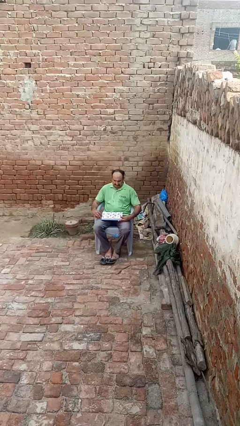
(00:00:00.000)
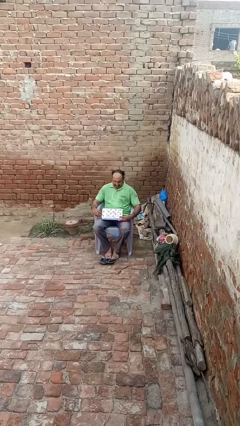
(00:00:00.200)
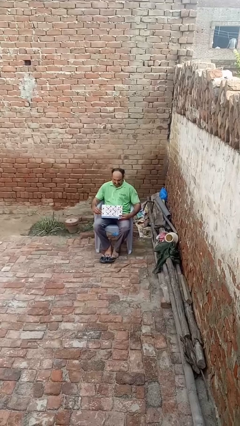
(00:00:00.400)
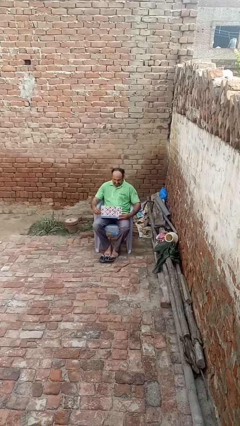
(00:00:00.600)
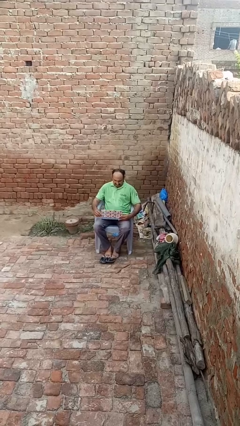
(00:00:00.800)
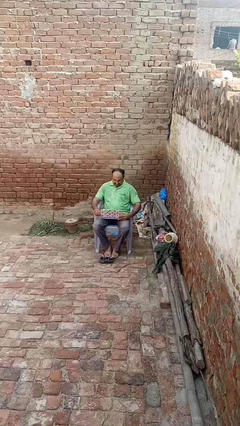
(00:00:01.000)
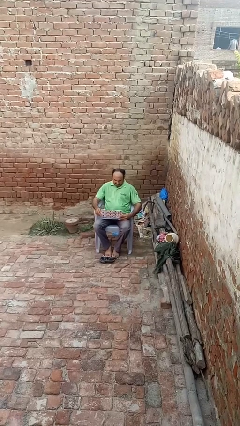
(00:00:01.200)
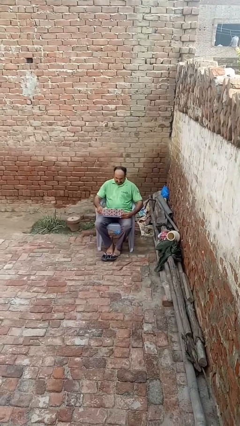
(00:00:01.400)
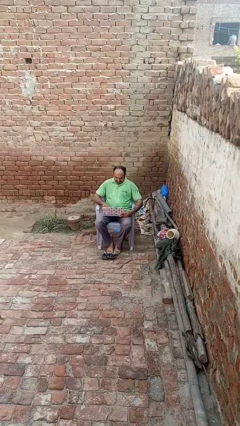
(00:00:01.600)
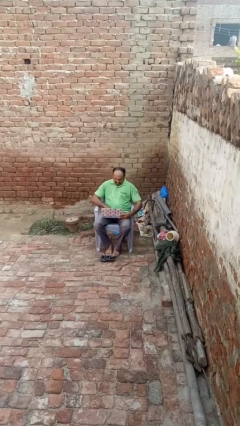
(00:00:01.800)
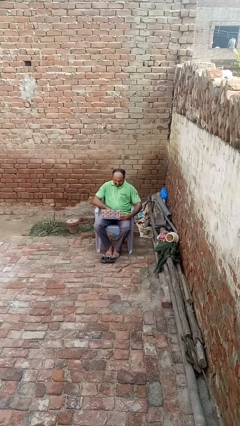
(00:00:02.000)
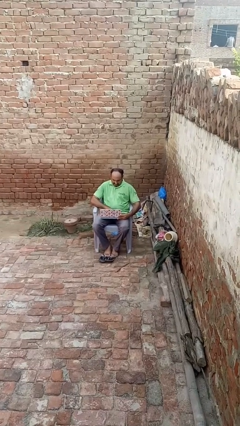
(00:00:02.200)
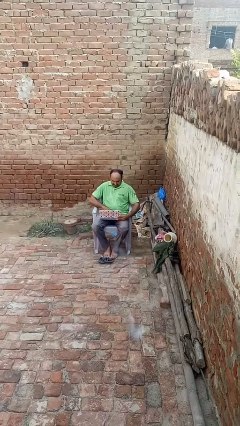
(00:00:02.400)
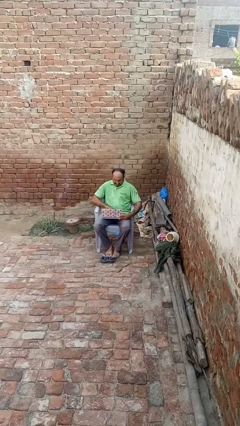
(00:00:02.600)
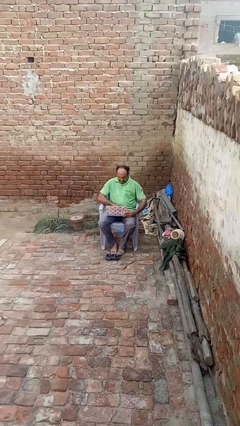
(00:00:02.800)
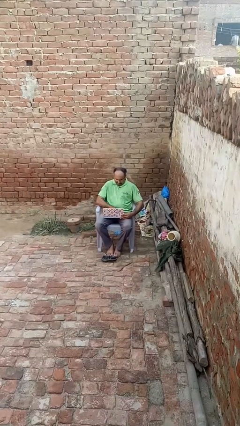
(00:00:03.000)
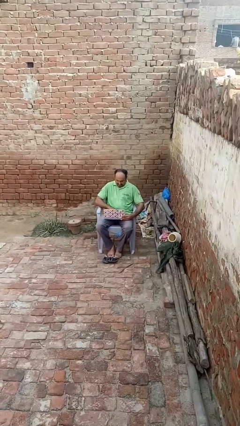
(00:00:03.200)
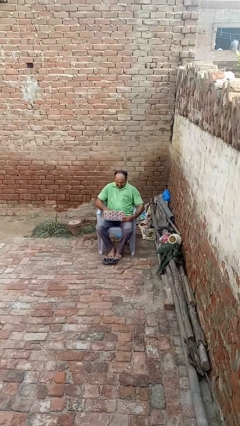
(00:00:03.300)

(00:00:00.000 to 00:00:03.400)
person opens laptop

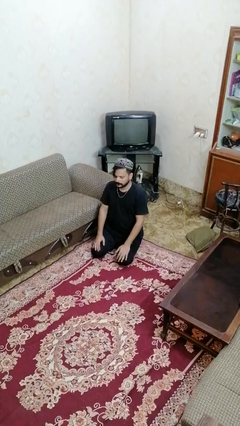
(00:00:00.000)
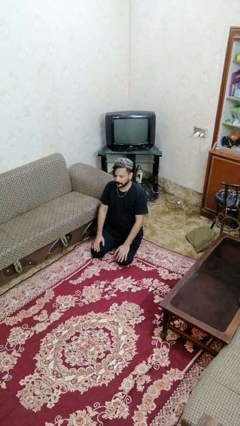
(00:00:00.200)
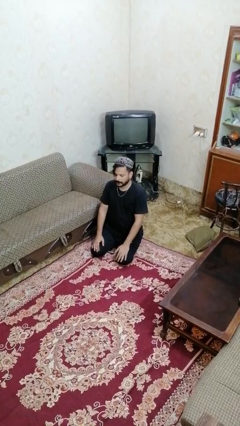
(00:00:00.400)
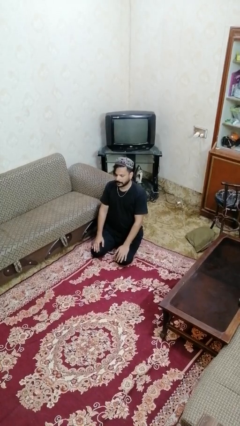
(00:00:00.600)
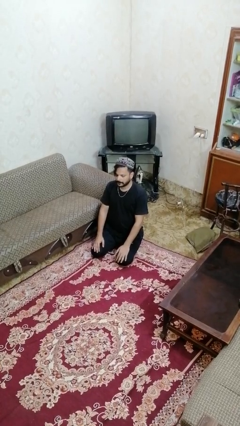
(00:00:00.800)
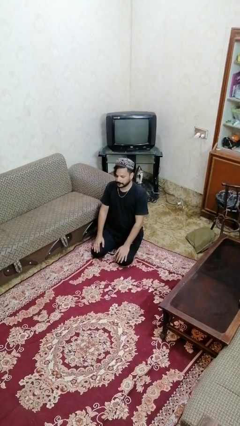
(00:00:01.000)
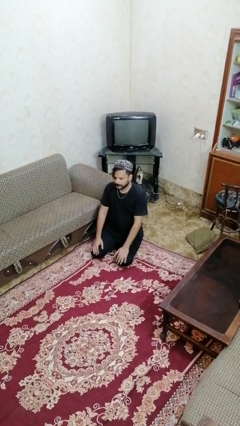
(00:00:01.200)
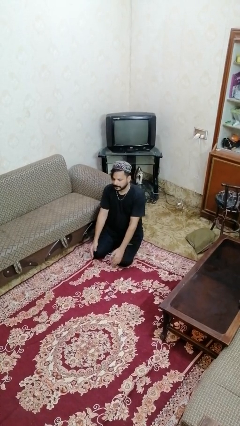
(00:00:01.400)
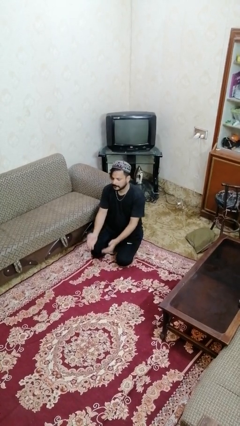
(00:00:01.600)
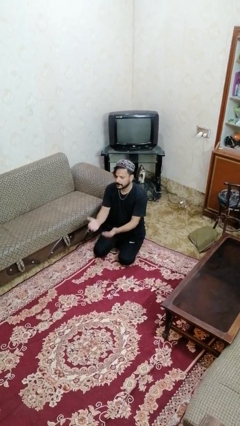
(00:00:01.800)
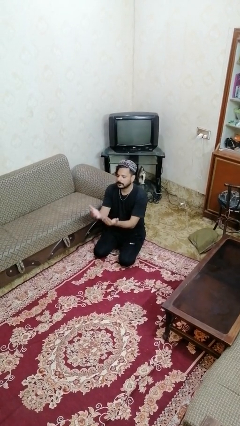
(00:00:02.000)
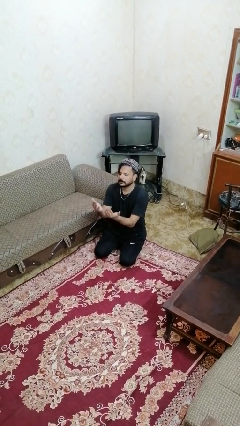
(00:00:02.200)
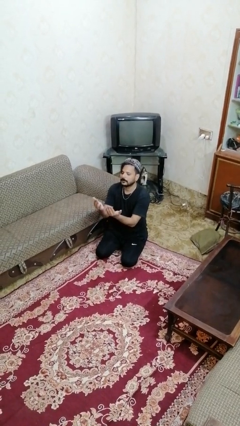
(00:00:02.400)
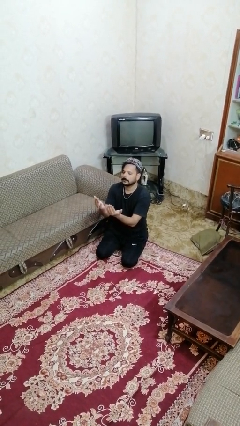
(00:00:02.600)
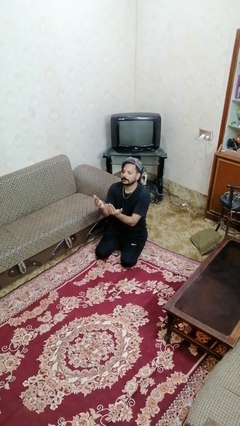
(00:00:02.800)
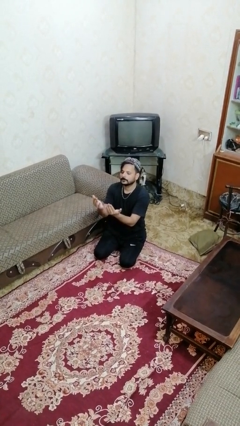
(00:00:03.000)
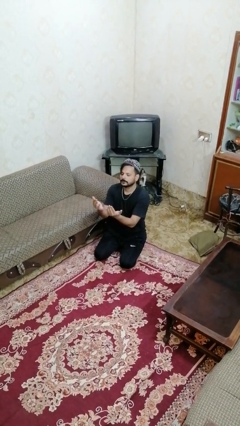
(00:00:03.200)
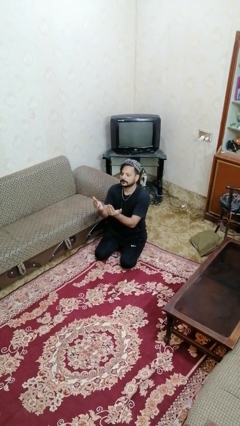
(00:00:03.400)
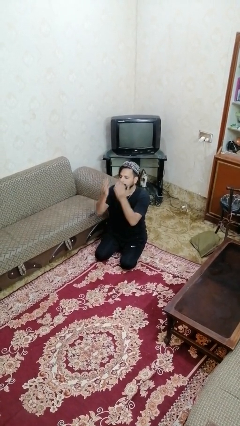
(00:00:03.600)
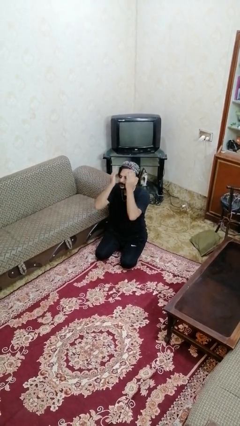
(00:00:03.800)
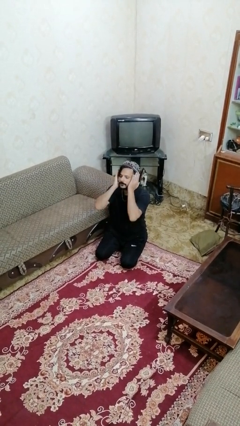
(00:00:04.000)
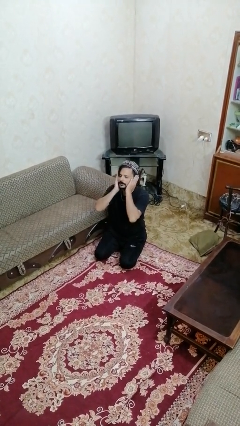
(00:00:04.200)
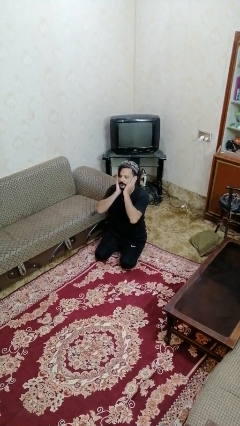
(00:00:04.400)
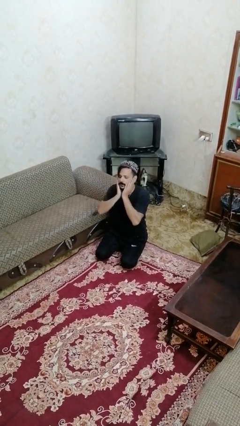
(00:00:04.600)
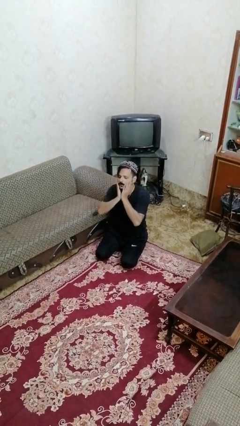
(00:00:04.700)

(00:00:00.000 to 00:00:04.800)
person prays

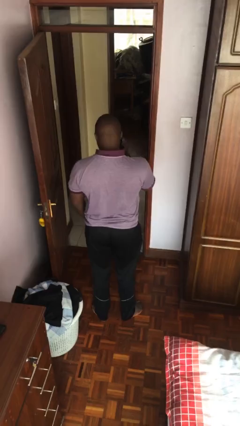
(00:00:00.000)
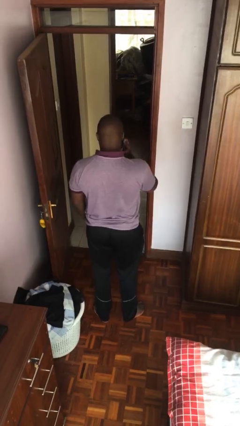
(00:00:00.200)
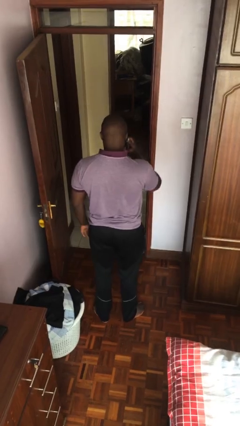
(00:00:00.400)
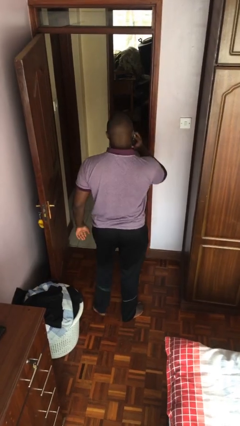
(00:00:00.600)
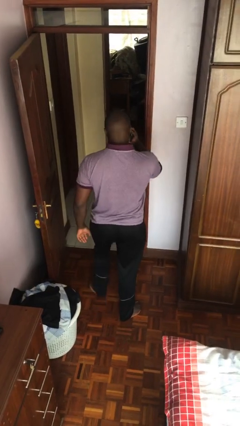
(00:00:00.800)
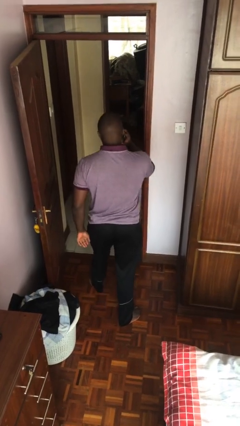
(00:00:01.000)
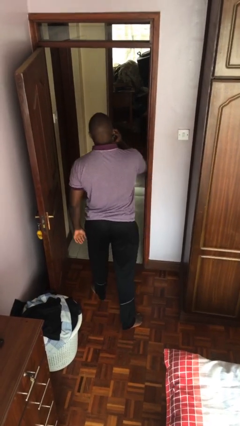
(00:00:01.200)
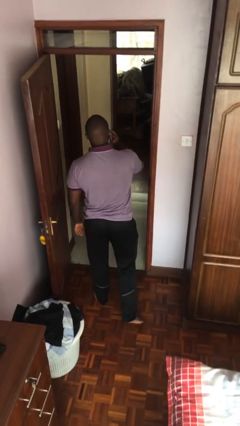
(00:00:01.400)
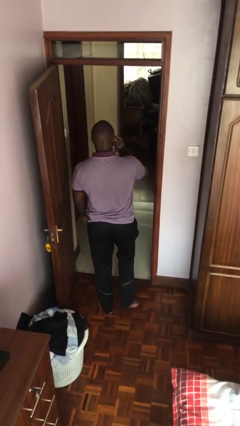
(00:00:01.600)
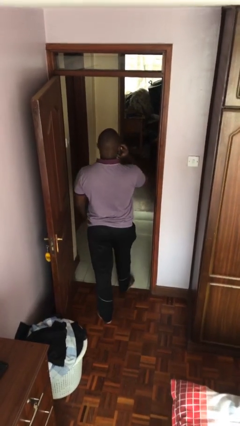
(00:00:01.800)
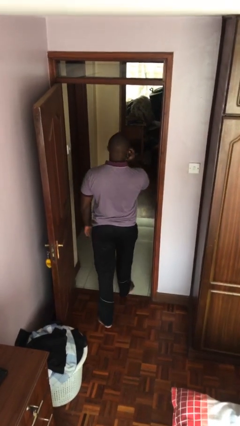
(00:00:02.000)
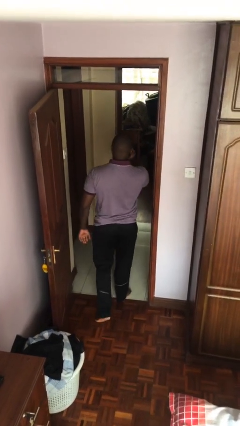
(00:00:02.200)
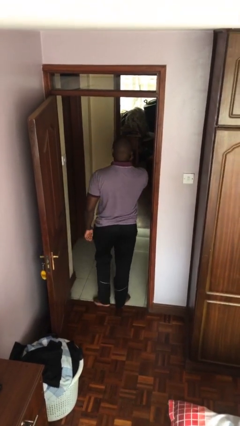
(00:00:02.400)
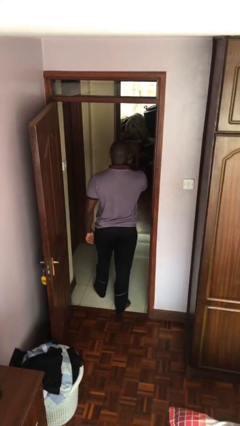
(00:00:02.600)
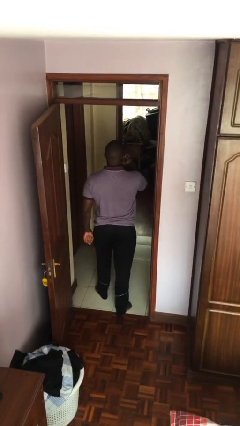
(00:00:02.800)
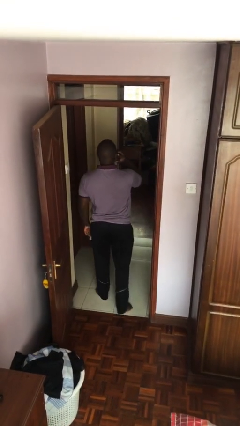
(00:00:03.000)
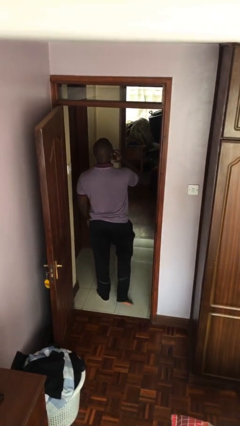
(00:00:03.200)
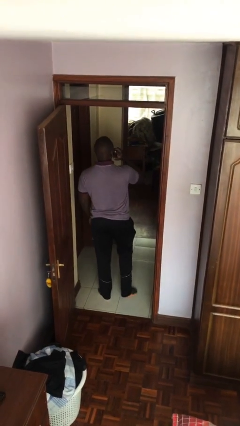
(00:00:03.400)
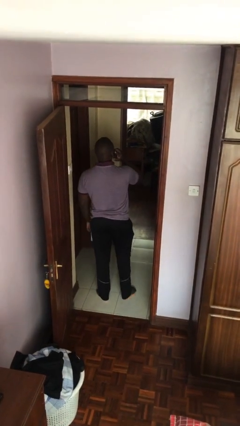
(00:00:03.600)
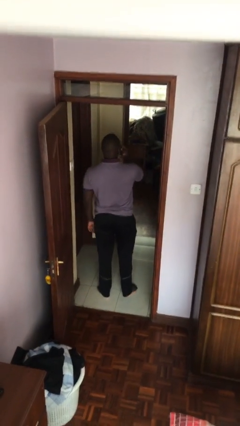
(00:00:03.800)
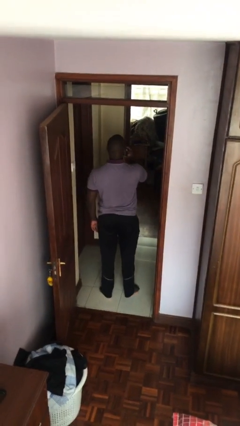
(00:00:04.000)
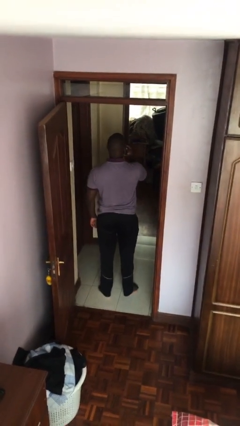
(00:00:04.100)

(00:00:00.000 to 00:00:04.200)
person exits scene through structure

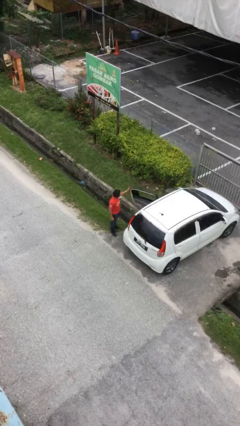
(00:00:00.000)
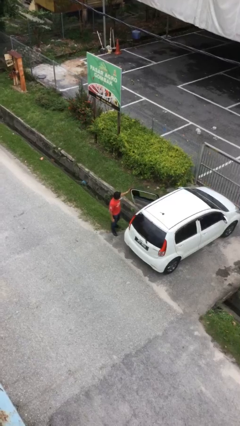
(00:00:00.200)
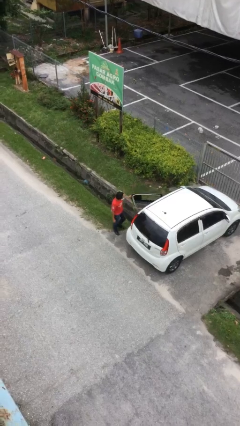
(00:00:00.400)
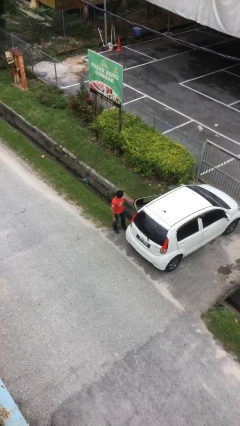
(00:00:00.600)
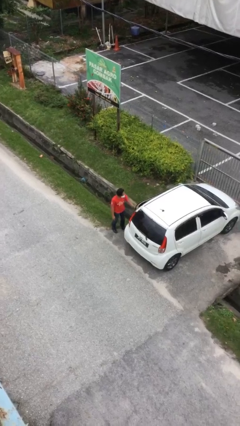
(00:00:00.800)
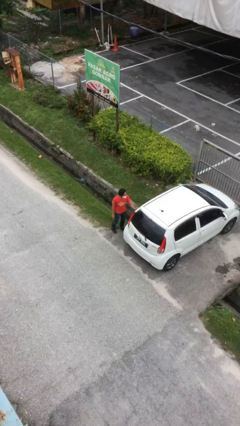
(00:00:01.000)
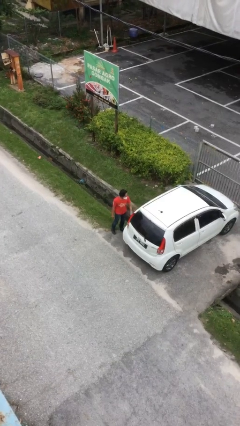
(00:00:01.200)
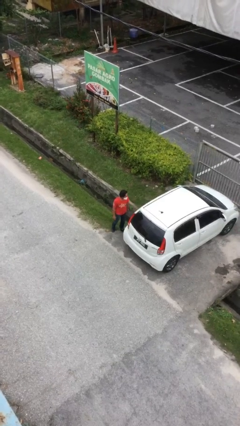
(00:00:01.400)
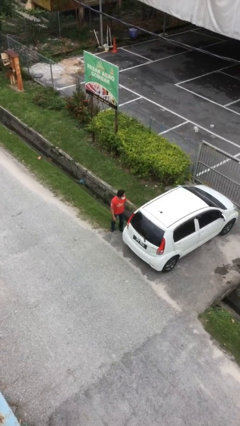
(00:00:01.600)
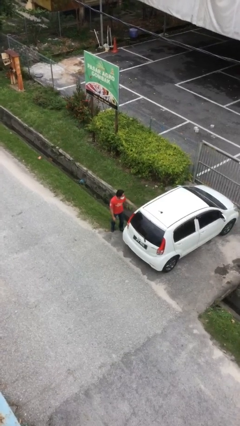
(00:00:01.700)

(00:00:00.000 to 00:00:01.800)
person closes car door

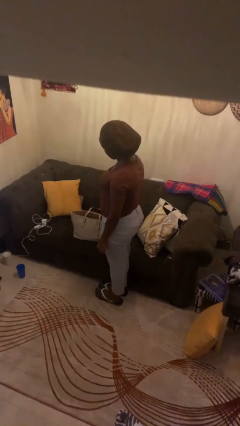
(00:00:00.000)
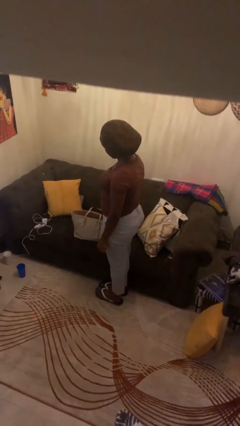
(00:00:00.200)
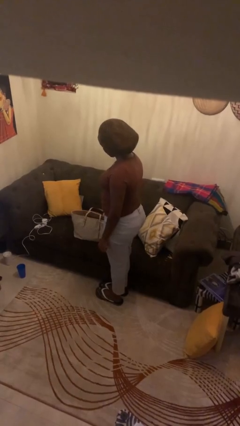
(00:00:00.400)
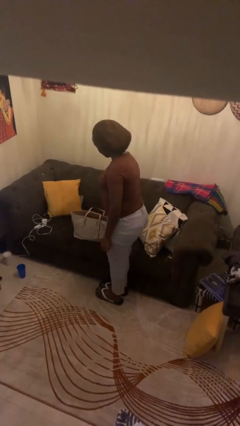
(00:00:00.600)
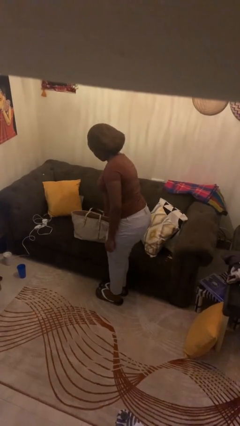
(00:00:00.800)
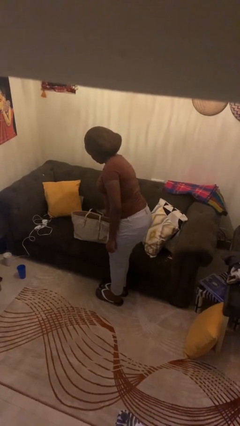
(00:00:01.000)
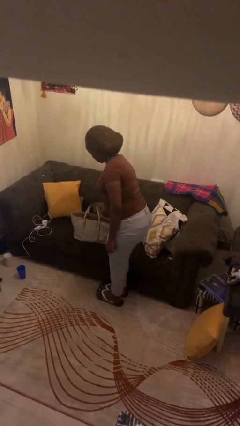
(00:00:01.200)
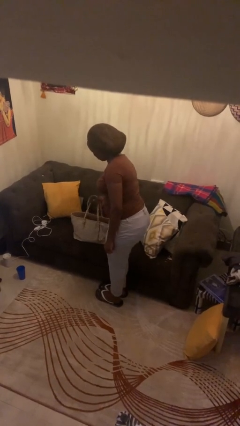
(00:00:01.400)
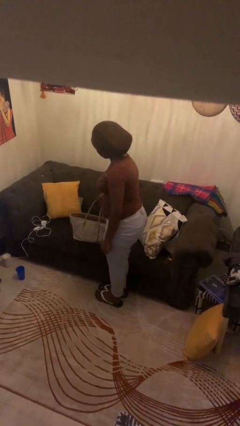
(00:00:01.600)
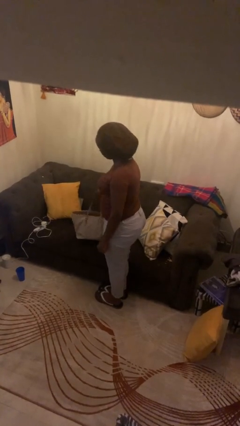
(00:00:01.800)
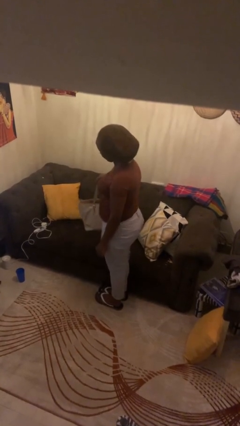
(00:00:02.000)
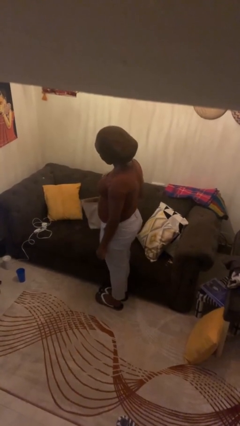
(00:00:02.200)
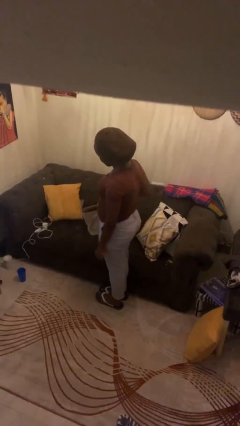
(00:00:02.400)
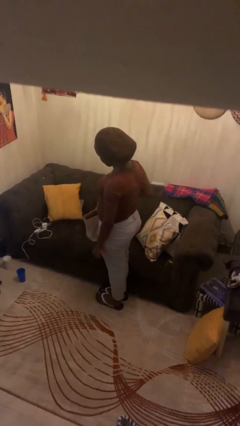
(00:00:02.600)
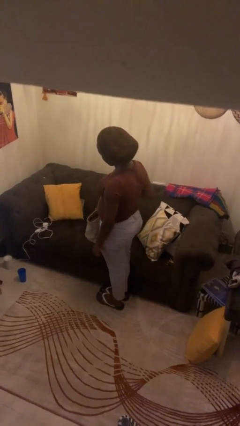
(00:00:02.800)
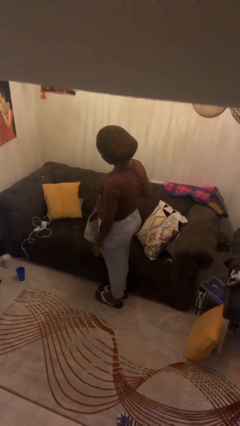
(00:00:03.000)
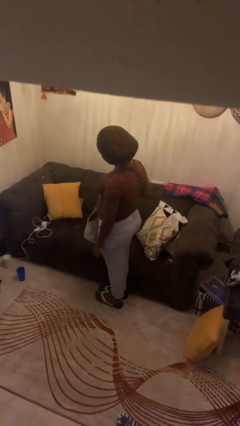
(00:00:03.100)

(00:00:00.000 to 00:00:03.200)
person picks up object from couch
